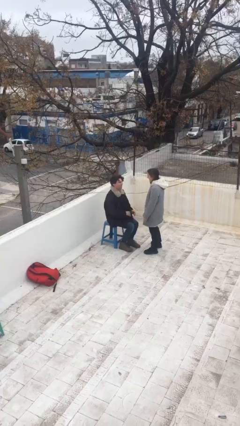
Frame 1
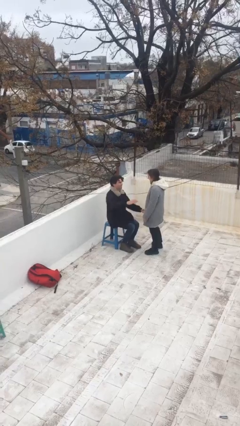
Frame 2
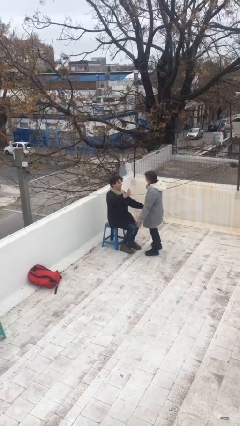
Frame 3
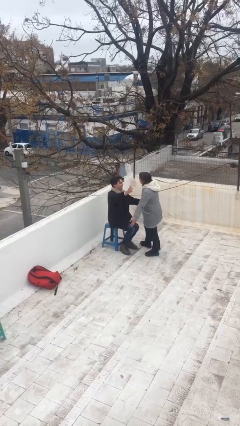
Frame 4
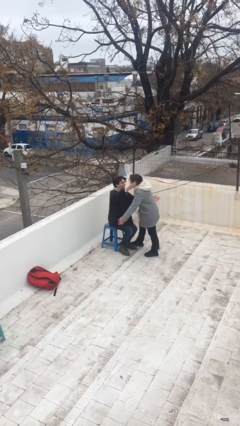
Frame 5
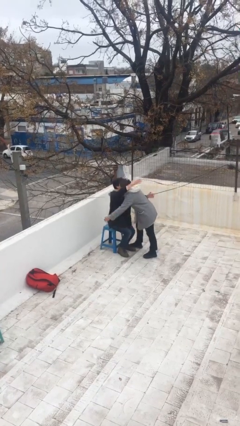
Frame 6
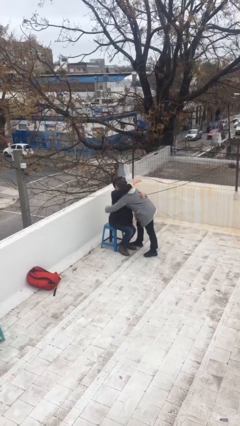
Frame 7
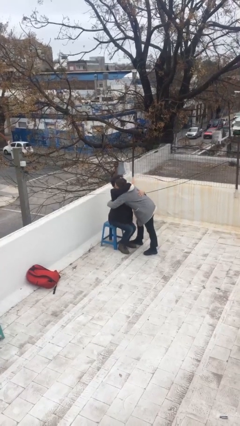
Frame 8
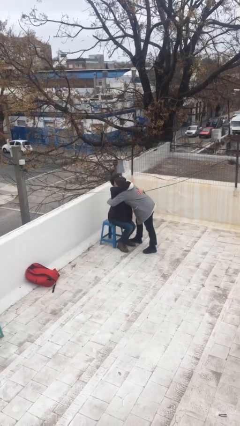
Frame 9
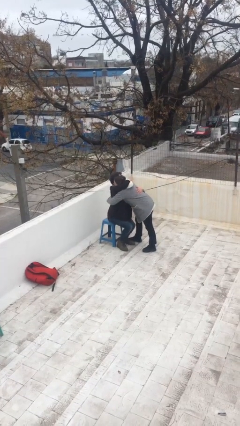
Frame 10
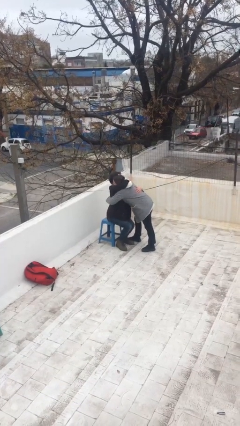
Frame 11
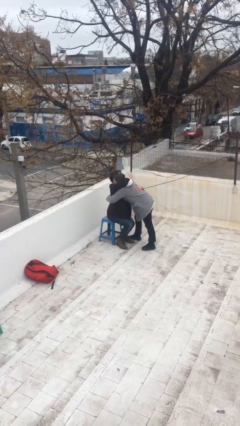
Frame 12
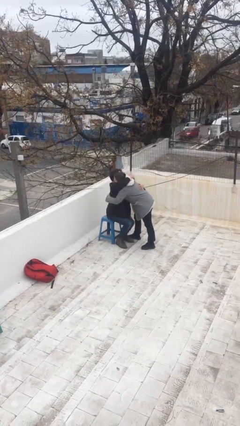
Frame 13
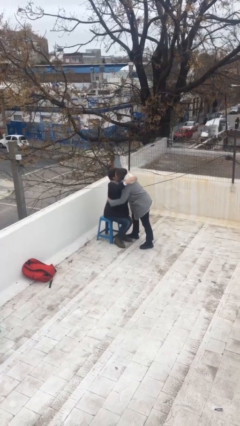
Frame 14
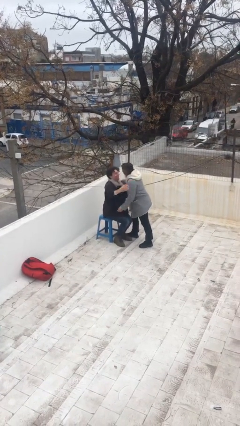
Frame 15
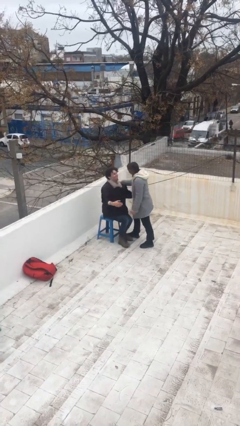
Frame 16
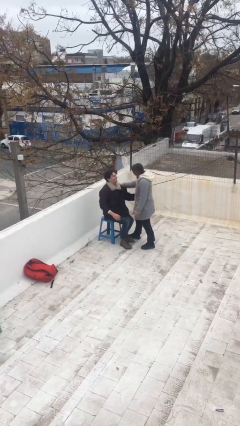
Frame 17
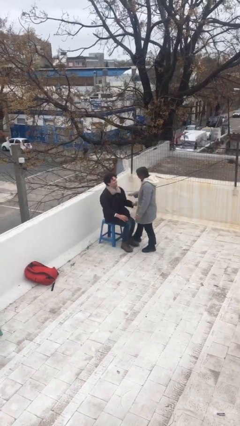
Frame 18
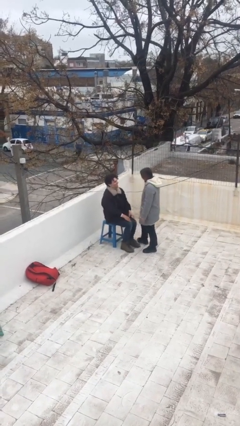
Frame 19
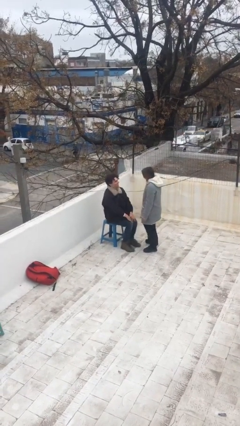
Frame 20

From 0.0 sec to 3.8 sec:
person embraces person

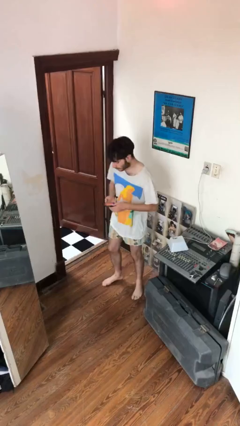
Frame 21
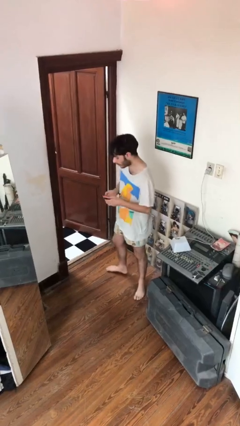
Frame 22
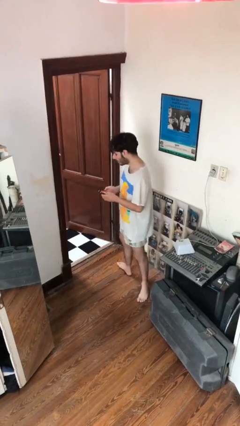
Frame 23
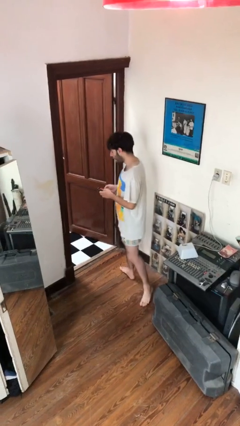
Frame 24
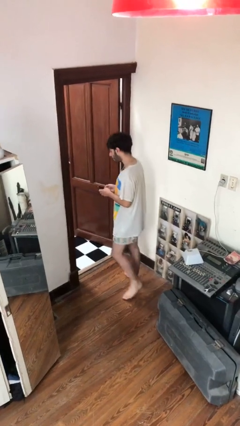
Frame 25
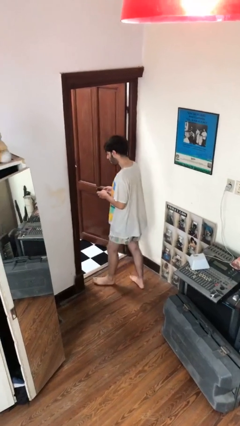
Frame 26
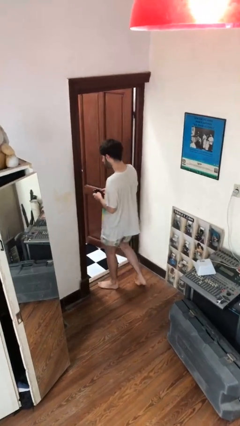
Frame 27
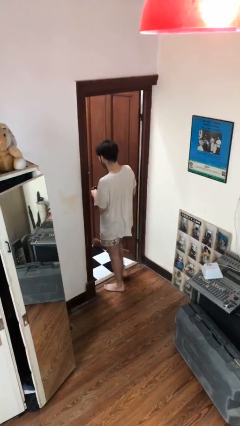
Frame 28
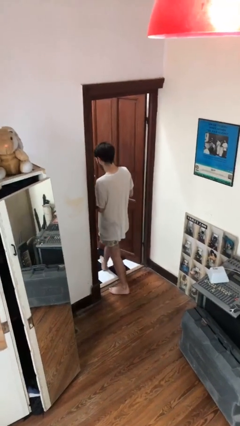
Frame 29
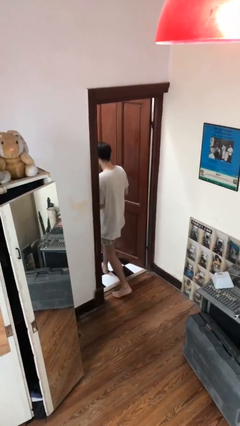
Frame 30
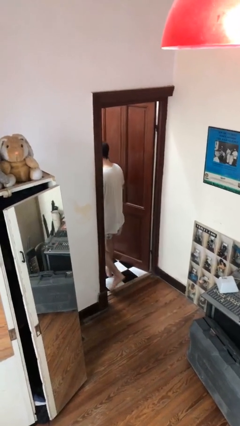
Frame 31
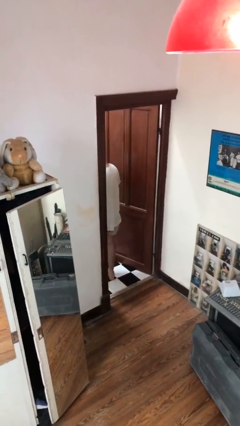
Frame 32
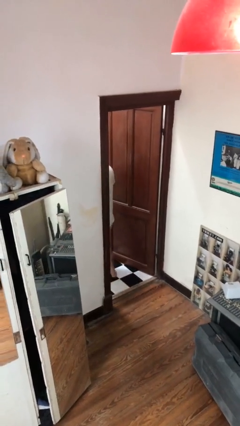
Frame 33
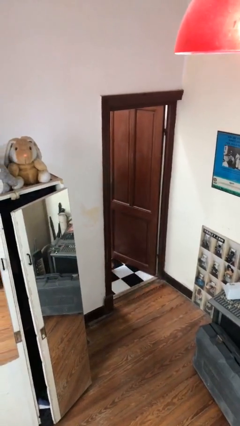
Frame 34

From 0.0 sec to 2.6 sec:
person exits scene through structure

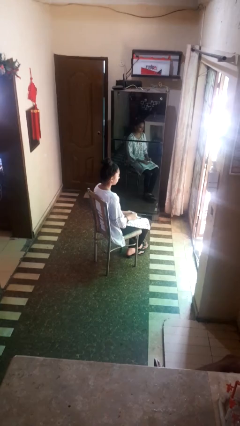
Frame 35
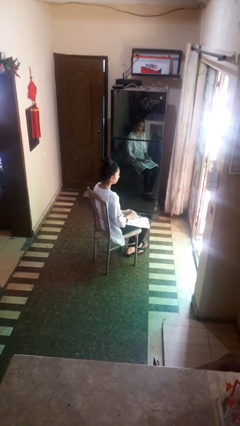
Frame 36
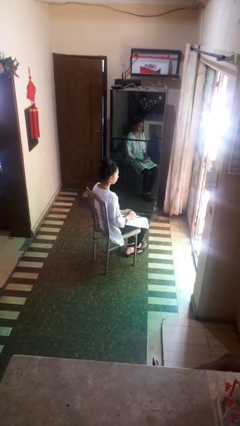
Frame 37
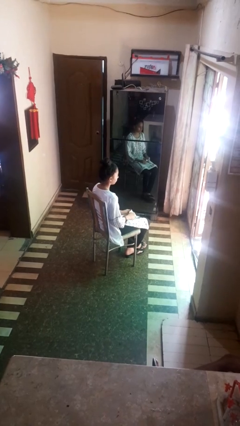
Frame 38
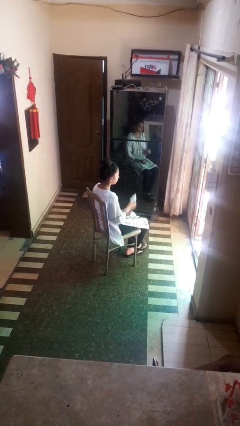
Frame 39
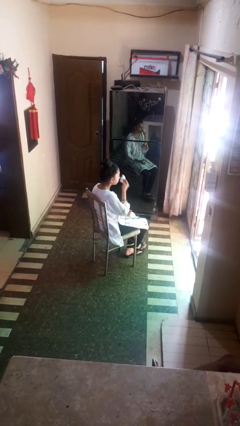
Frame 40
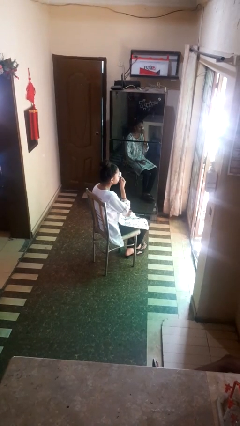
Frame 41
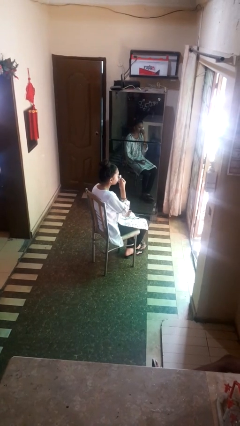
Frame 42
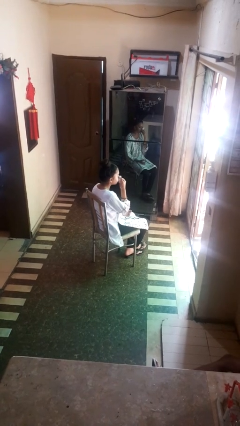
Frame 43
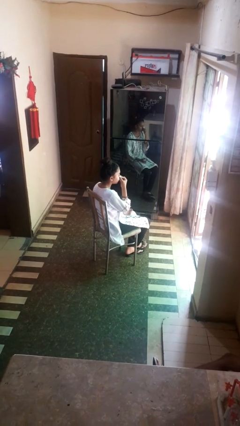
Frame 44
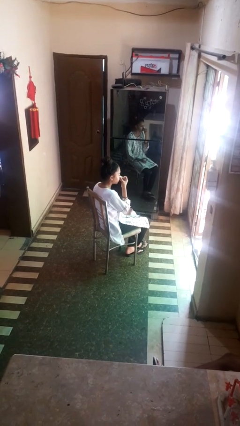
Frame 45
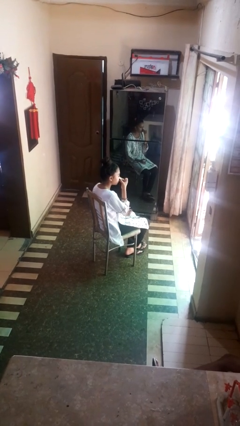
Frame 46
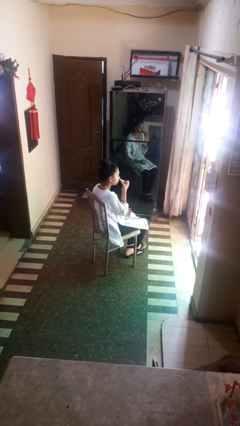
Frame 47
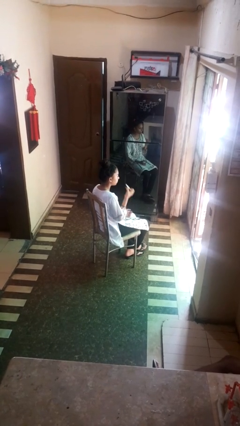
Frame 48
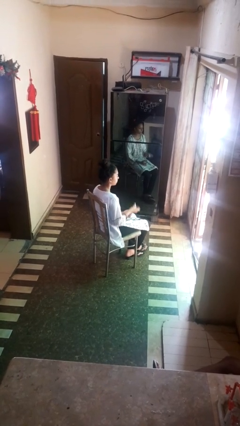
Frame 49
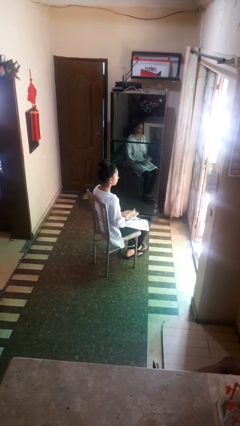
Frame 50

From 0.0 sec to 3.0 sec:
person blows nose

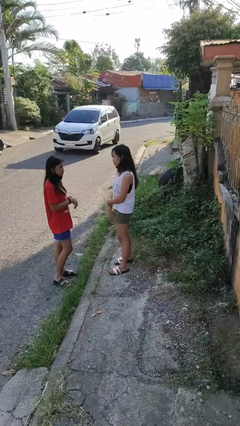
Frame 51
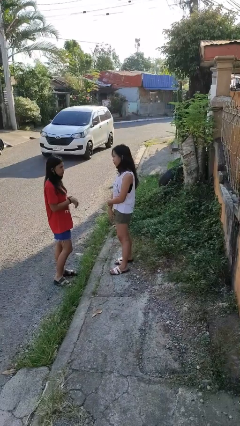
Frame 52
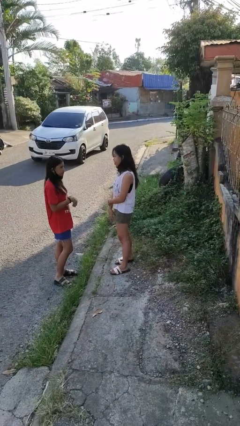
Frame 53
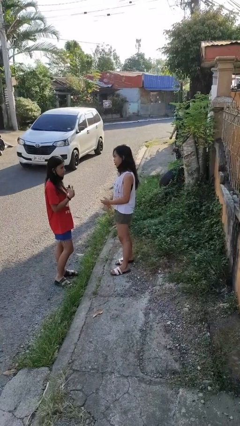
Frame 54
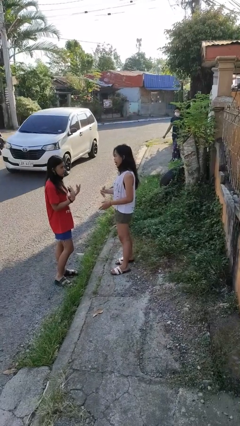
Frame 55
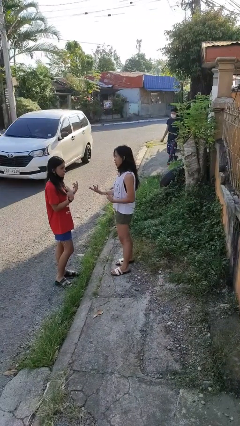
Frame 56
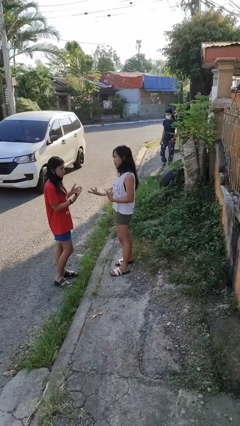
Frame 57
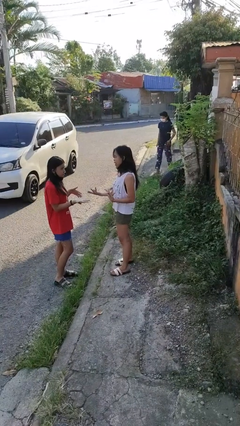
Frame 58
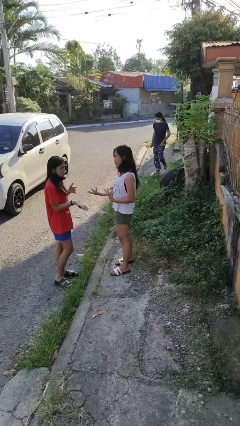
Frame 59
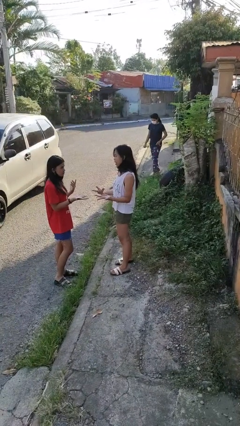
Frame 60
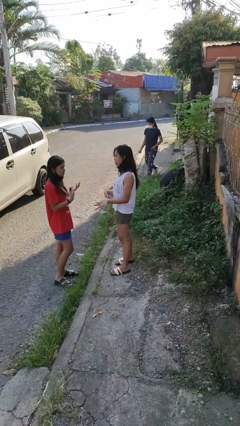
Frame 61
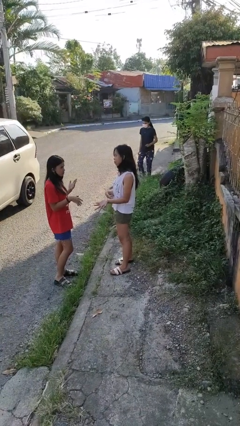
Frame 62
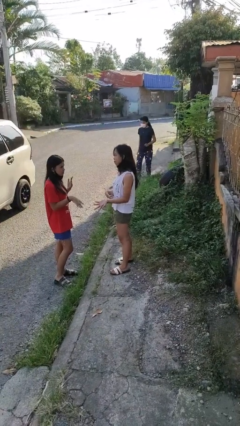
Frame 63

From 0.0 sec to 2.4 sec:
person talks to person

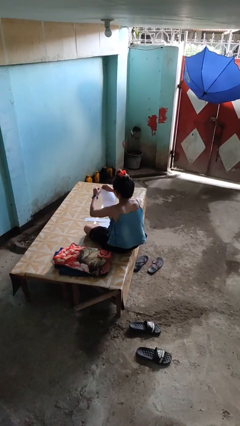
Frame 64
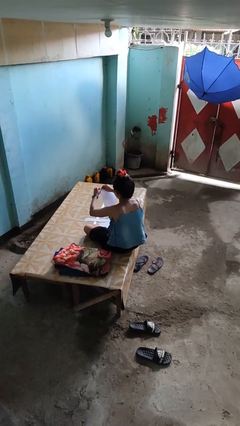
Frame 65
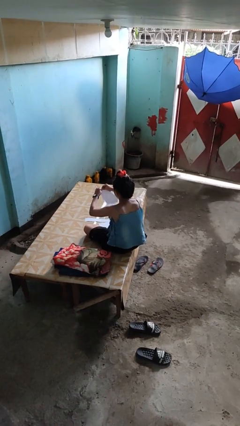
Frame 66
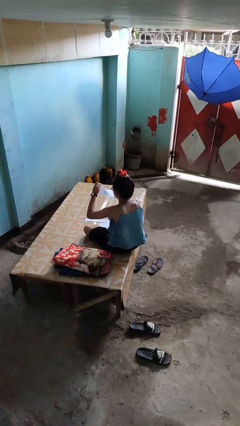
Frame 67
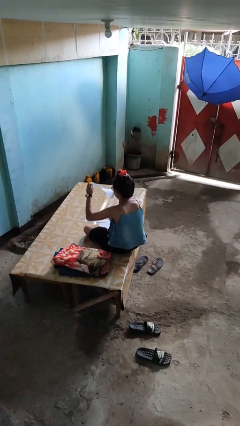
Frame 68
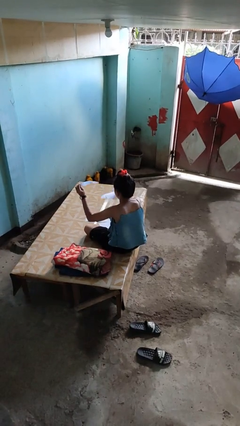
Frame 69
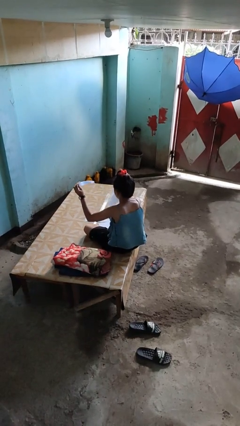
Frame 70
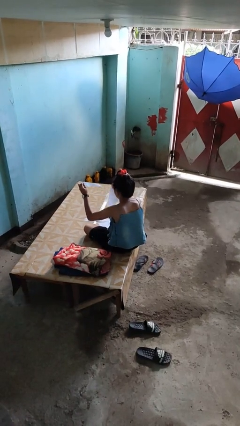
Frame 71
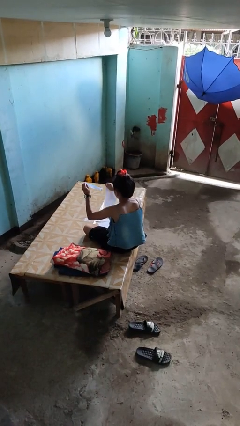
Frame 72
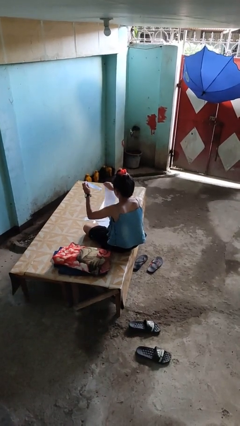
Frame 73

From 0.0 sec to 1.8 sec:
person tears paper

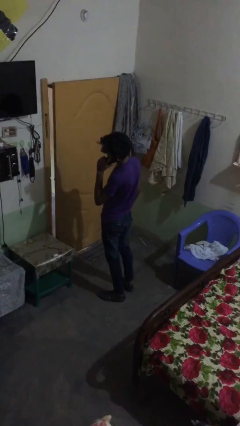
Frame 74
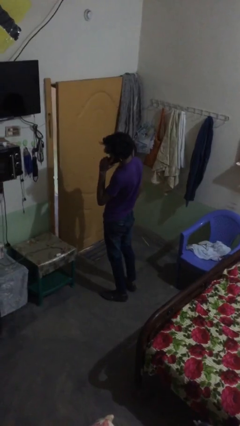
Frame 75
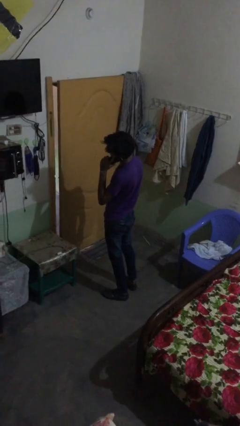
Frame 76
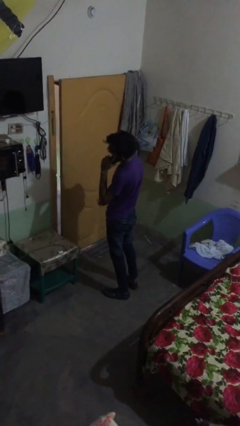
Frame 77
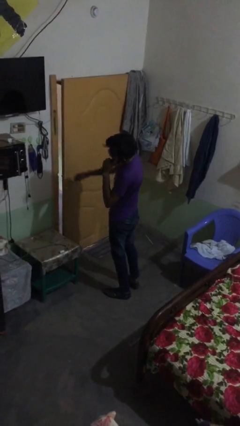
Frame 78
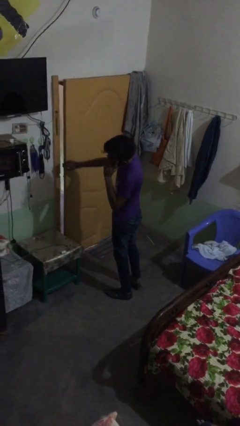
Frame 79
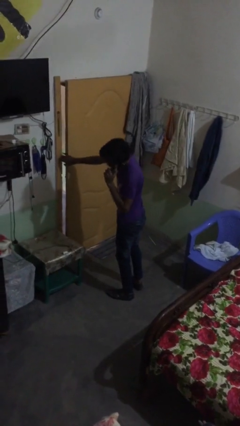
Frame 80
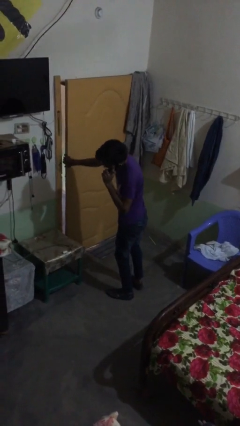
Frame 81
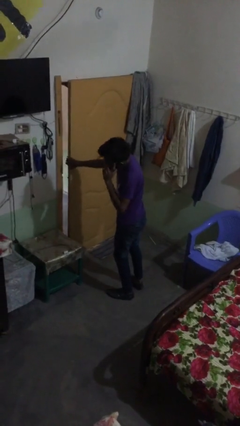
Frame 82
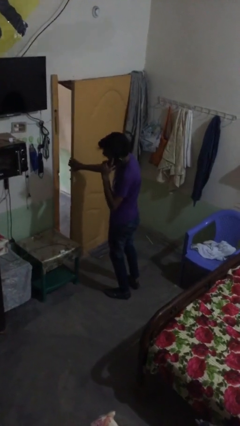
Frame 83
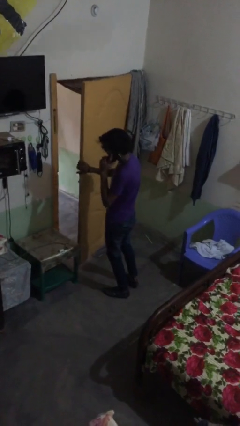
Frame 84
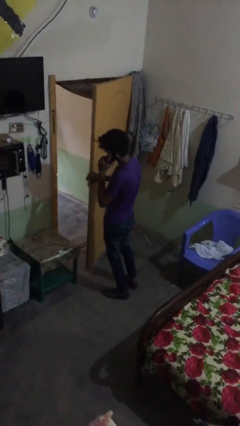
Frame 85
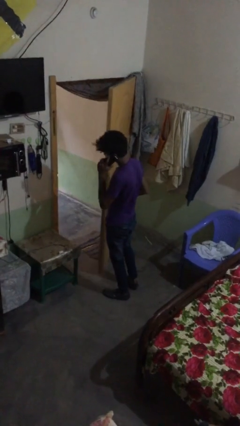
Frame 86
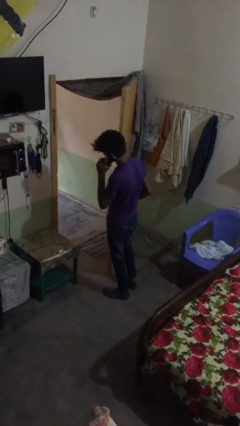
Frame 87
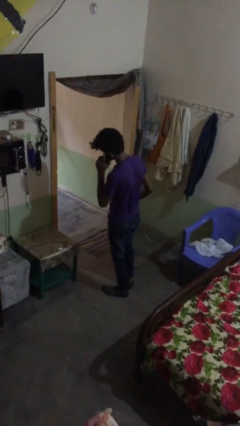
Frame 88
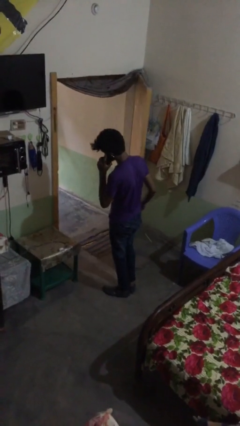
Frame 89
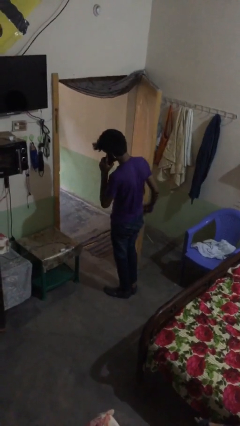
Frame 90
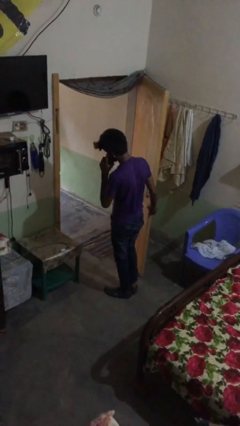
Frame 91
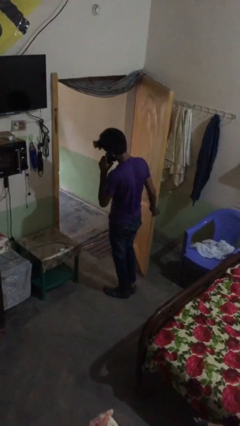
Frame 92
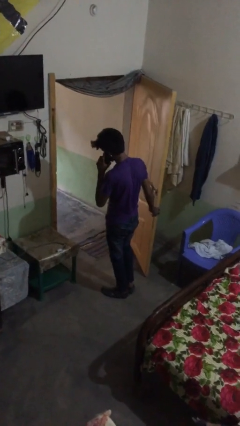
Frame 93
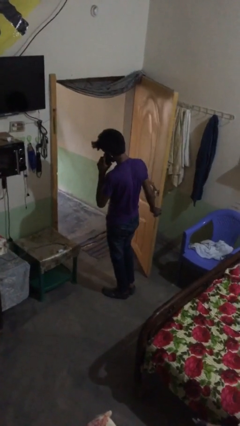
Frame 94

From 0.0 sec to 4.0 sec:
person opens facility door
